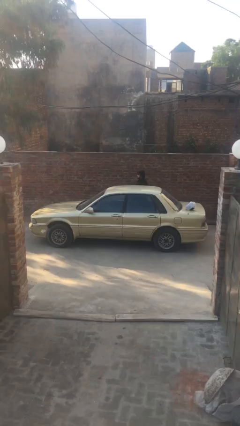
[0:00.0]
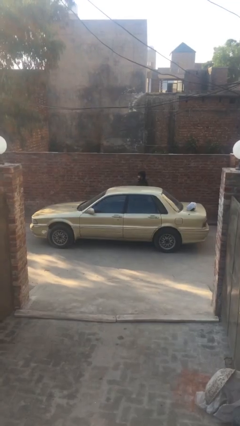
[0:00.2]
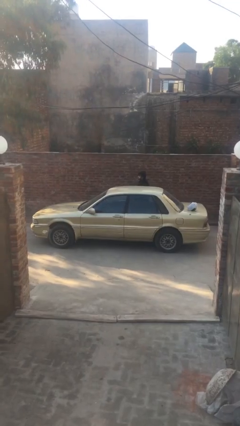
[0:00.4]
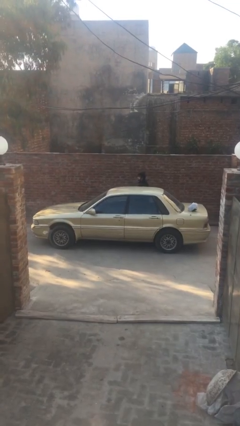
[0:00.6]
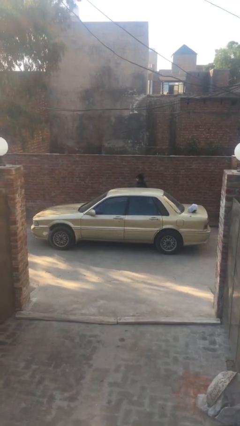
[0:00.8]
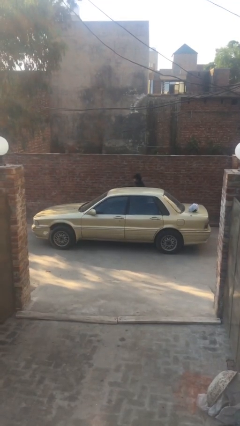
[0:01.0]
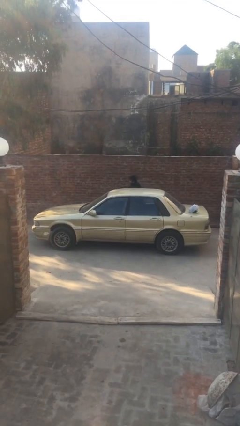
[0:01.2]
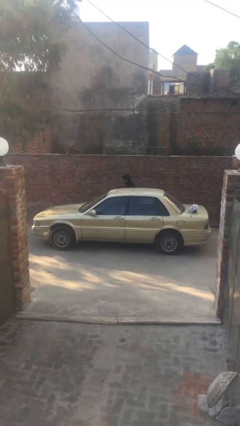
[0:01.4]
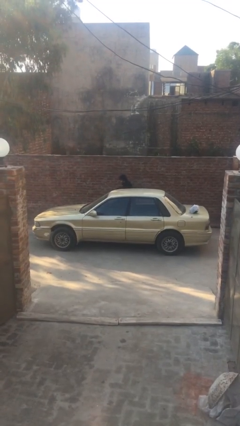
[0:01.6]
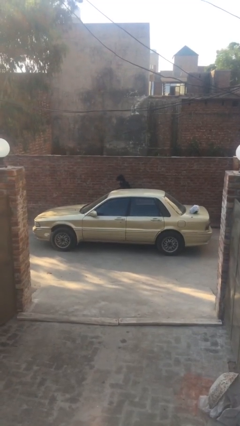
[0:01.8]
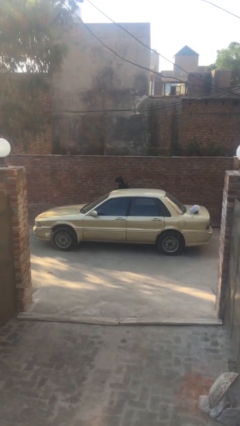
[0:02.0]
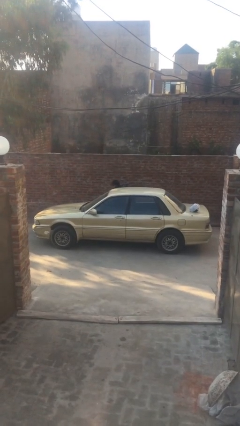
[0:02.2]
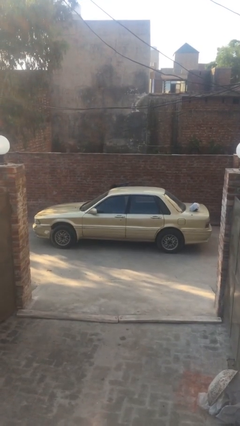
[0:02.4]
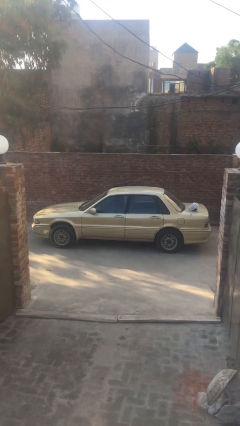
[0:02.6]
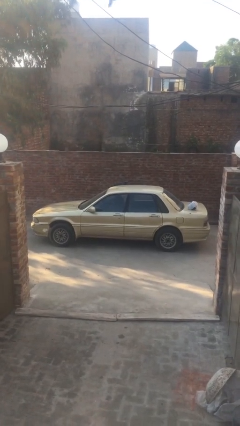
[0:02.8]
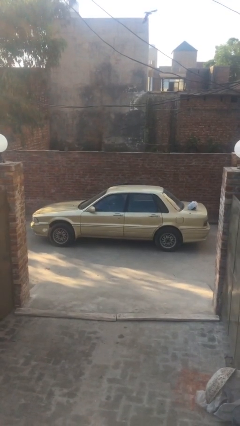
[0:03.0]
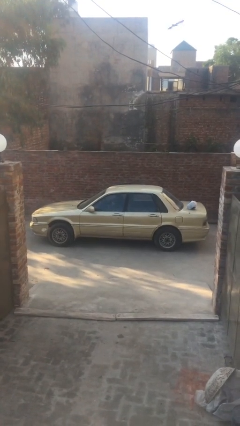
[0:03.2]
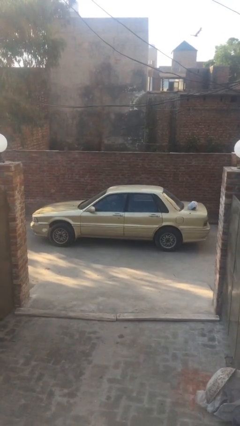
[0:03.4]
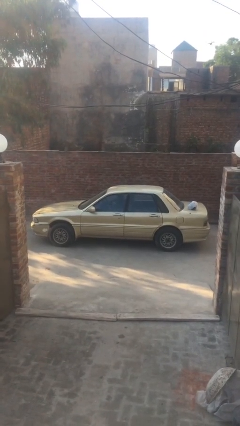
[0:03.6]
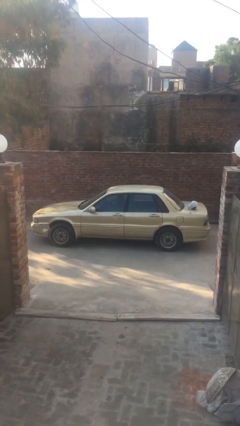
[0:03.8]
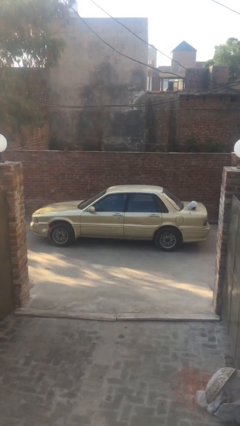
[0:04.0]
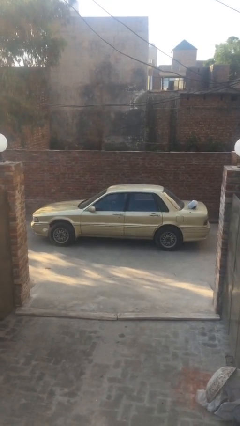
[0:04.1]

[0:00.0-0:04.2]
car picks up person

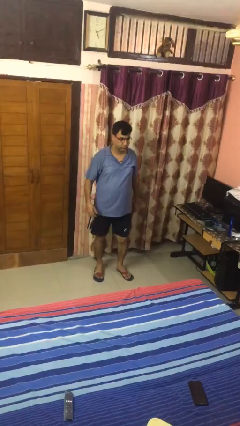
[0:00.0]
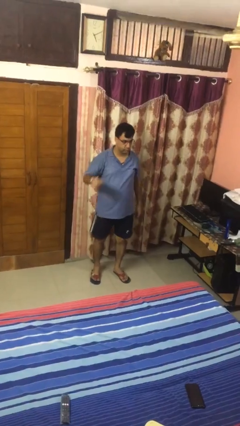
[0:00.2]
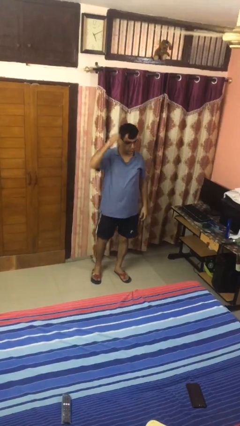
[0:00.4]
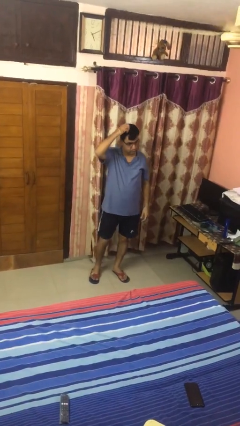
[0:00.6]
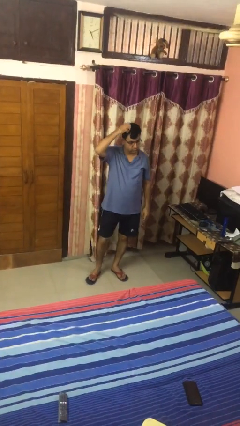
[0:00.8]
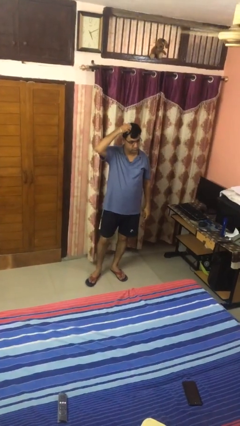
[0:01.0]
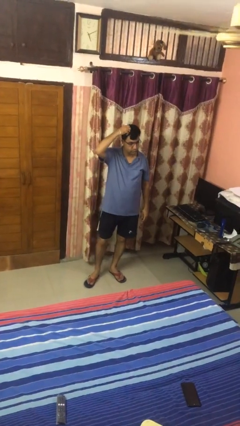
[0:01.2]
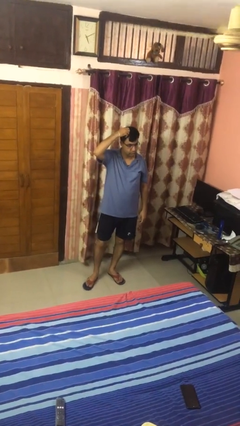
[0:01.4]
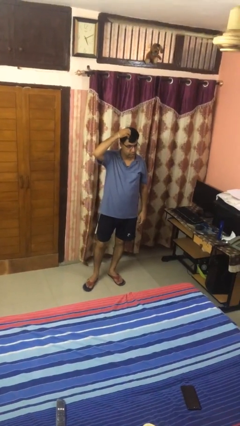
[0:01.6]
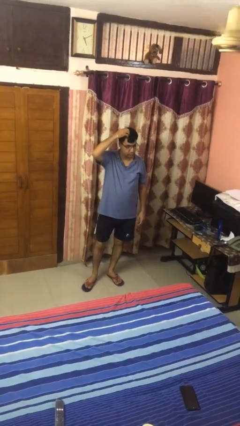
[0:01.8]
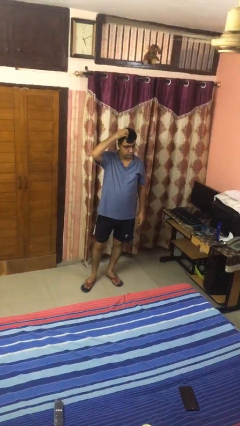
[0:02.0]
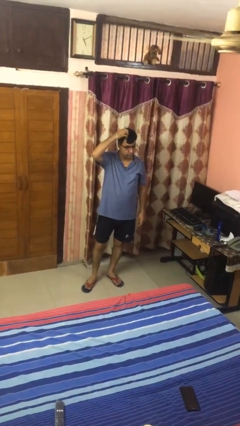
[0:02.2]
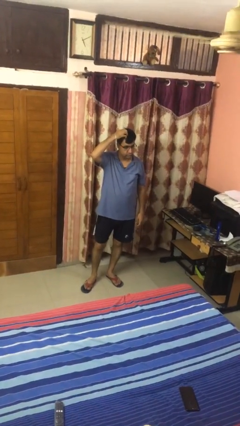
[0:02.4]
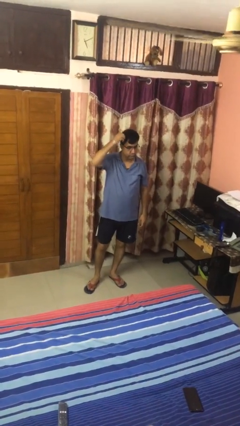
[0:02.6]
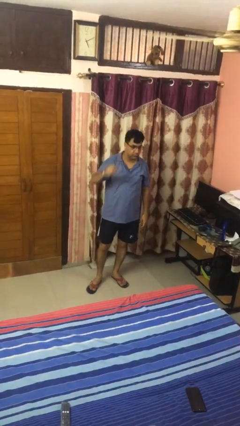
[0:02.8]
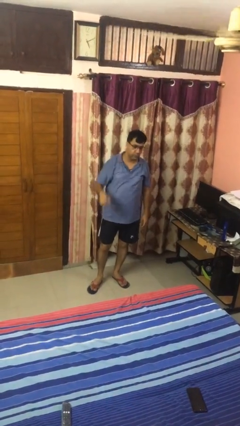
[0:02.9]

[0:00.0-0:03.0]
person scratches face

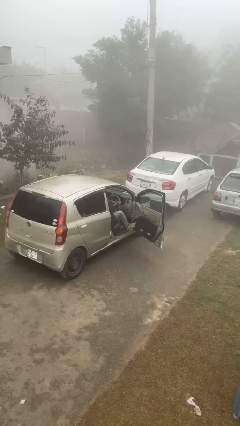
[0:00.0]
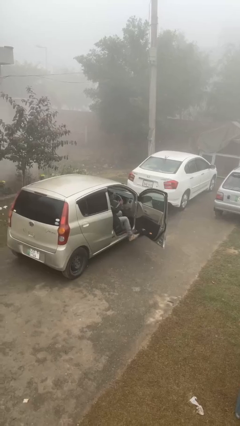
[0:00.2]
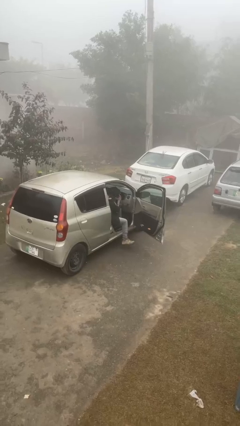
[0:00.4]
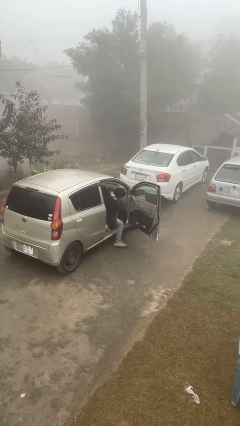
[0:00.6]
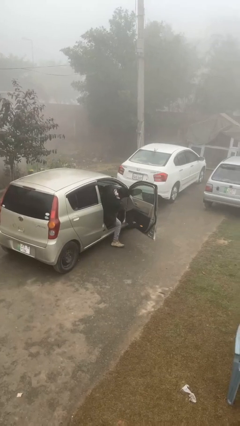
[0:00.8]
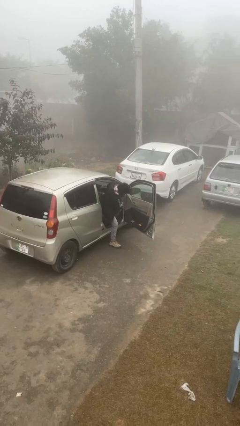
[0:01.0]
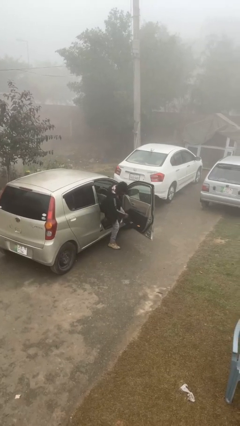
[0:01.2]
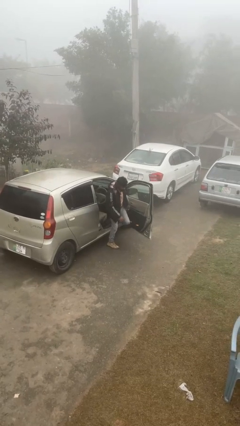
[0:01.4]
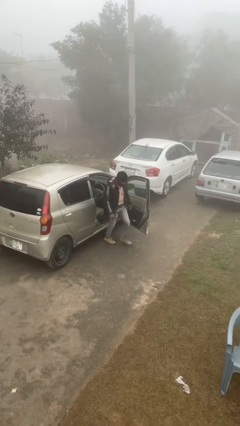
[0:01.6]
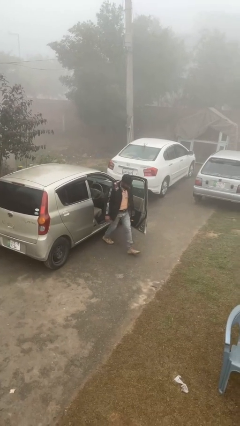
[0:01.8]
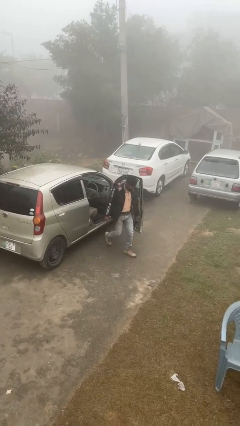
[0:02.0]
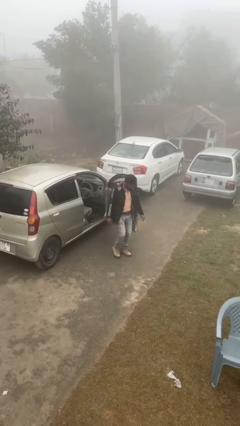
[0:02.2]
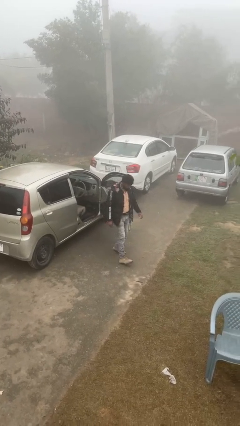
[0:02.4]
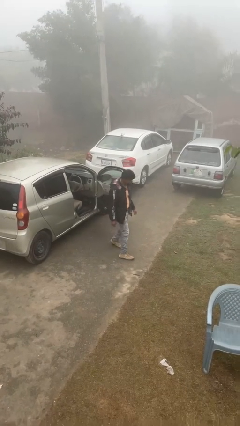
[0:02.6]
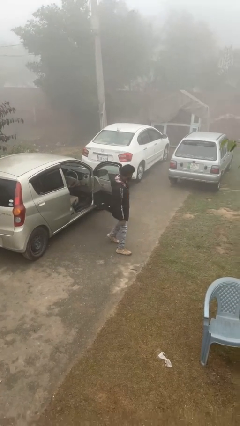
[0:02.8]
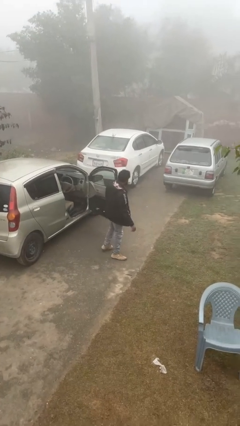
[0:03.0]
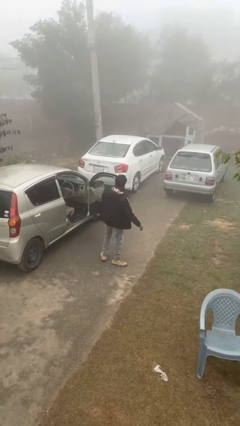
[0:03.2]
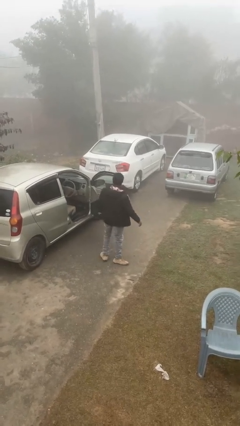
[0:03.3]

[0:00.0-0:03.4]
person exits car

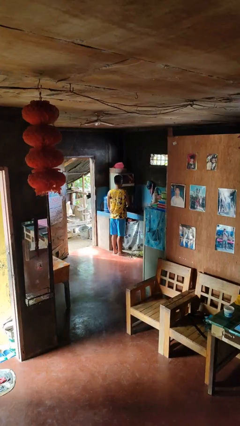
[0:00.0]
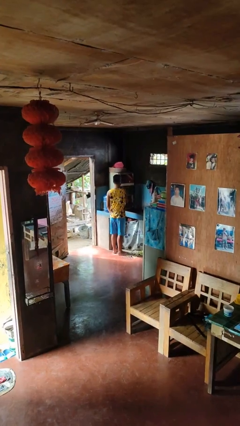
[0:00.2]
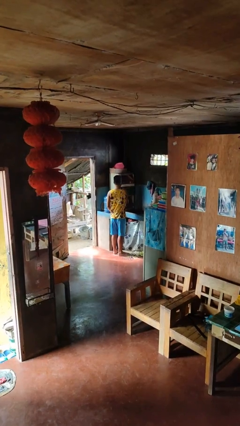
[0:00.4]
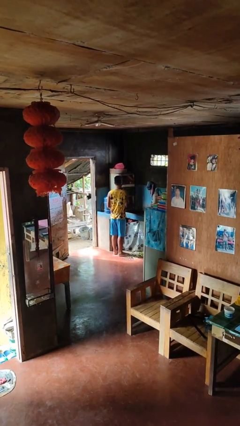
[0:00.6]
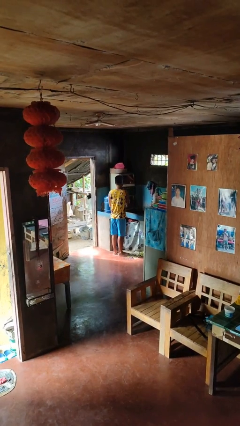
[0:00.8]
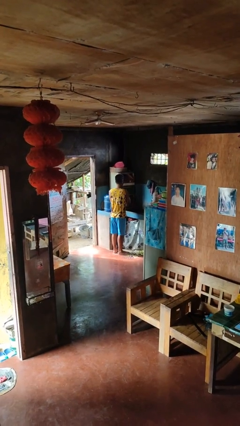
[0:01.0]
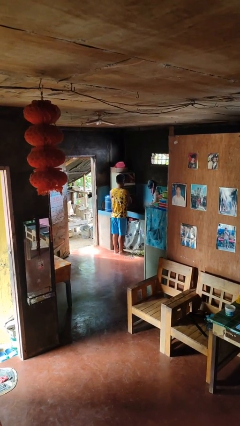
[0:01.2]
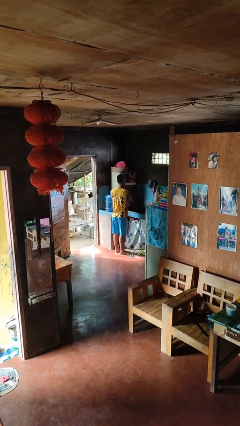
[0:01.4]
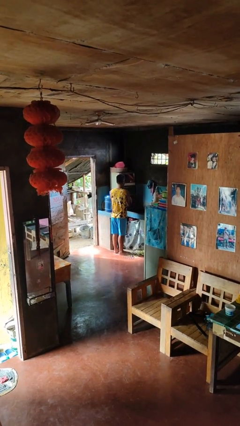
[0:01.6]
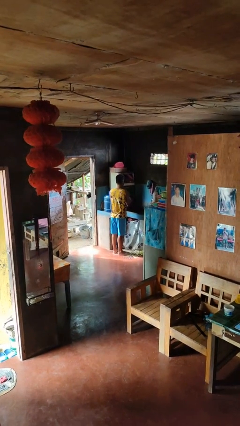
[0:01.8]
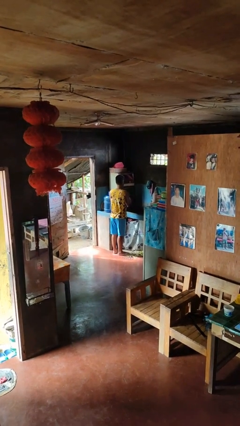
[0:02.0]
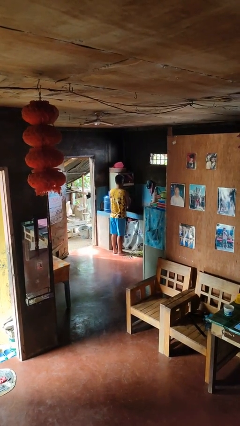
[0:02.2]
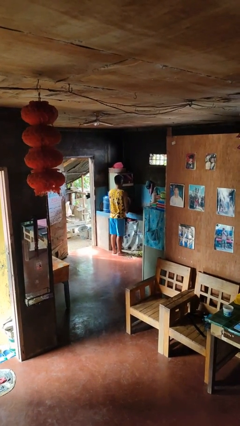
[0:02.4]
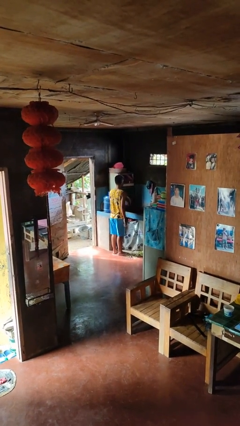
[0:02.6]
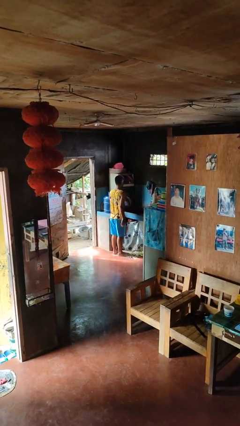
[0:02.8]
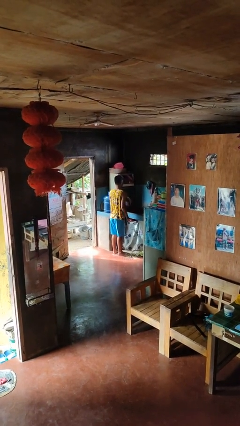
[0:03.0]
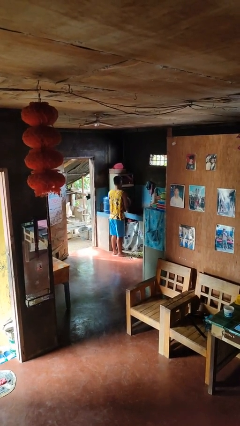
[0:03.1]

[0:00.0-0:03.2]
person opens dishwasher

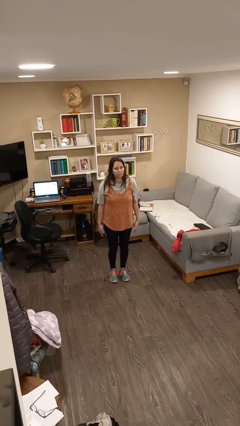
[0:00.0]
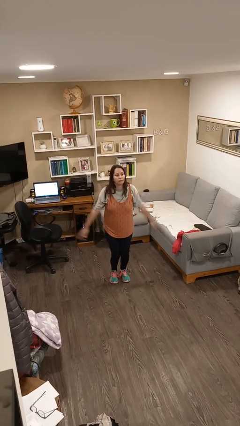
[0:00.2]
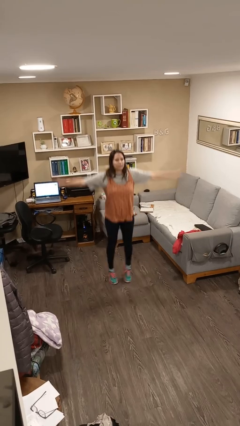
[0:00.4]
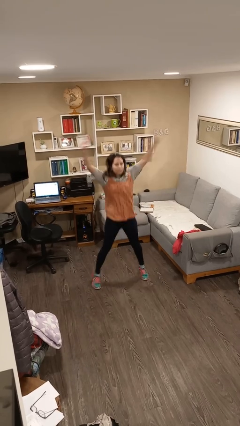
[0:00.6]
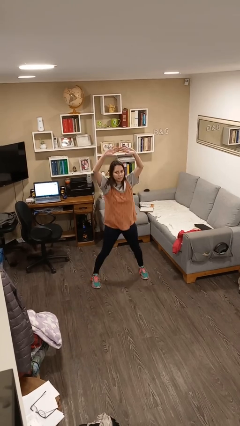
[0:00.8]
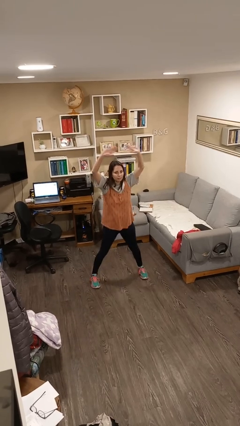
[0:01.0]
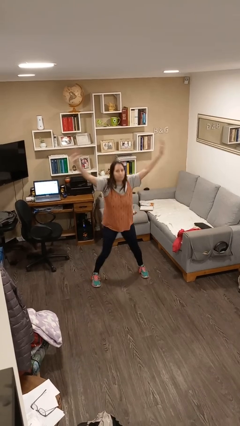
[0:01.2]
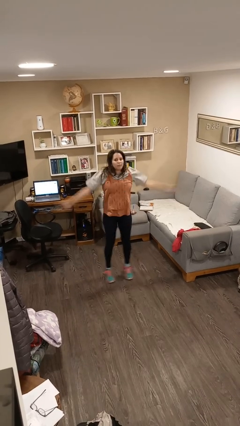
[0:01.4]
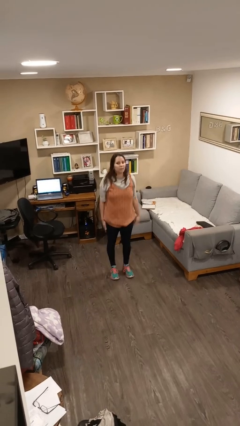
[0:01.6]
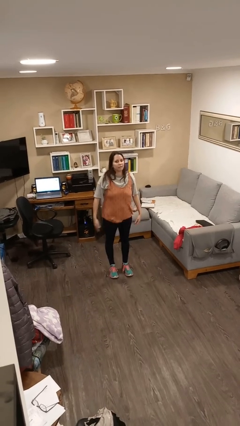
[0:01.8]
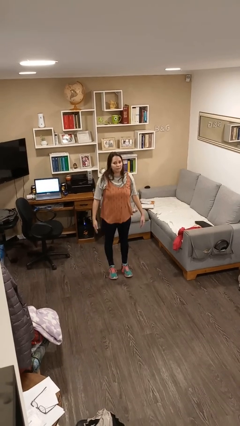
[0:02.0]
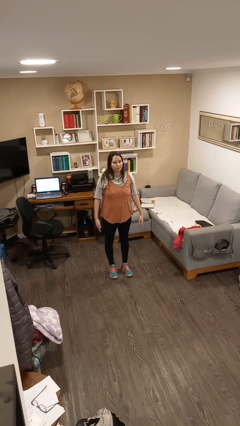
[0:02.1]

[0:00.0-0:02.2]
person exercises with jumping jacks

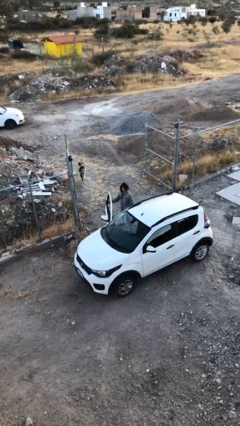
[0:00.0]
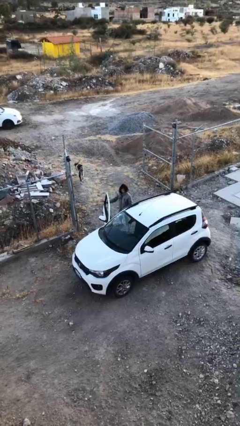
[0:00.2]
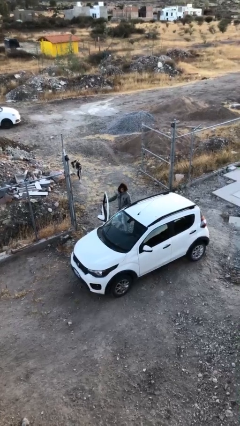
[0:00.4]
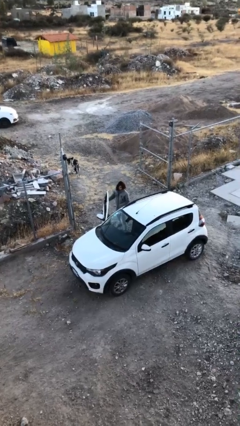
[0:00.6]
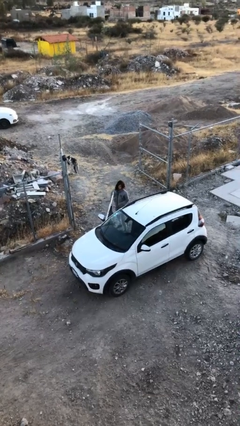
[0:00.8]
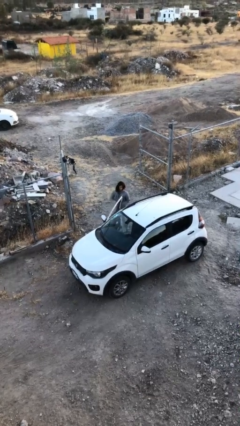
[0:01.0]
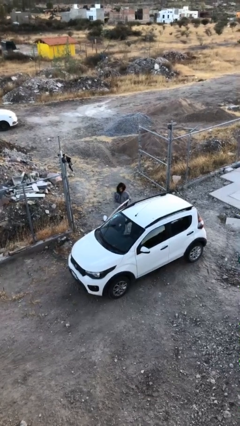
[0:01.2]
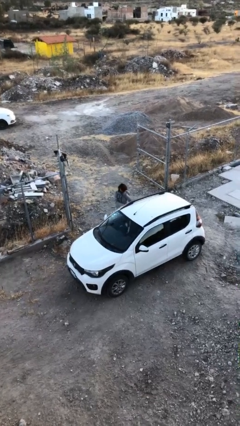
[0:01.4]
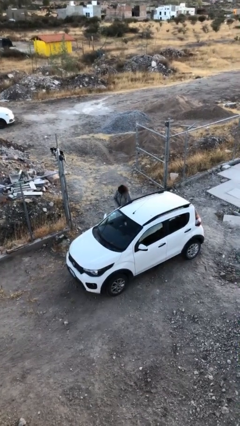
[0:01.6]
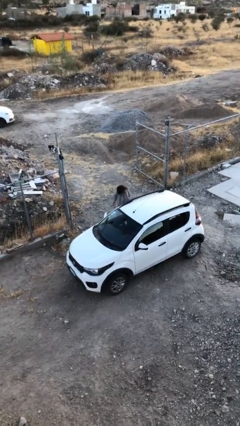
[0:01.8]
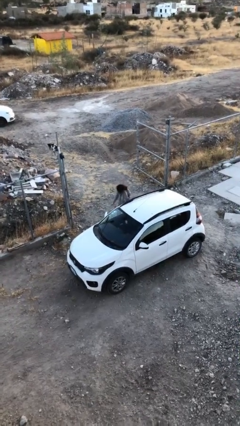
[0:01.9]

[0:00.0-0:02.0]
person closes car door
